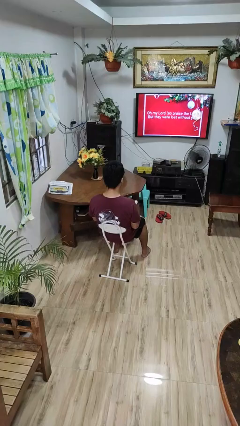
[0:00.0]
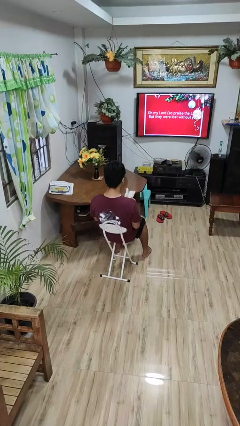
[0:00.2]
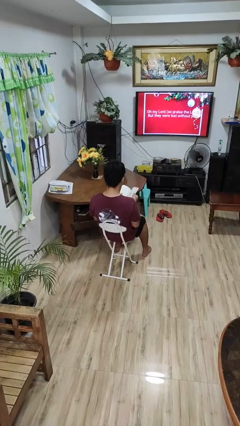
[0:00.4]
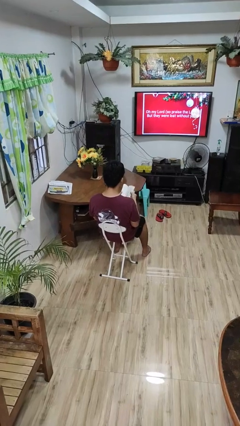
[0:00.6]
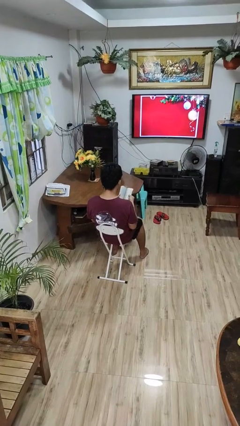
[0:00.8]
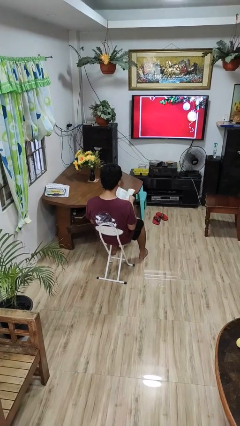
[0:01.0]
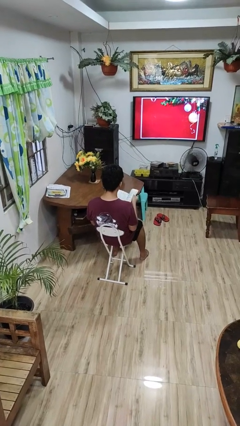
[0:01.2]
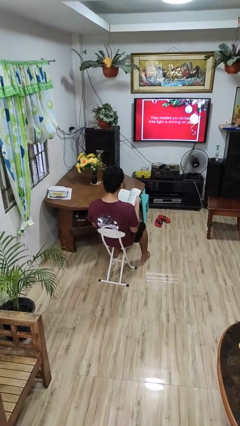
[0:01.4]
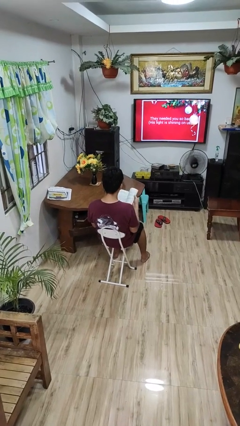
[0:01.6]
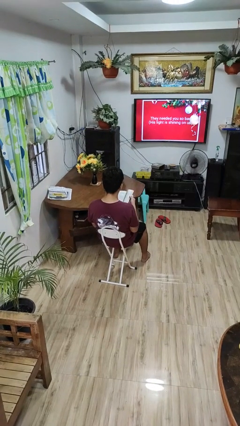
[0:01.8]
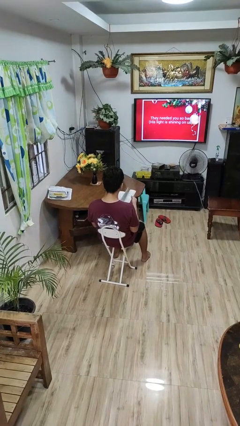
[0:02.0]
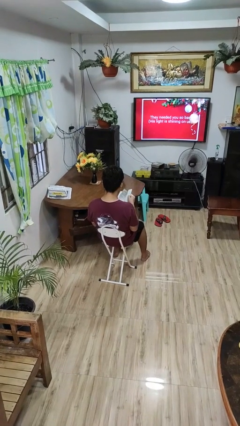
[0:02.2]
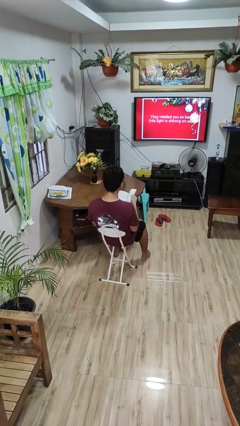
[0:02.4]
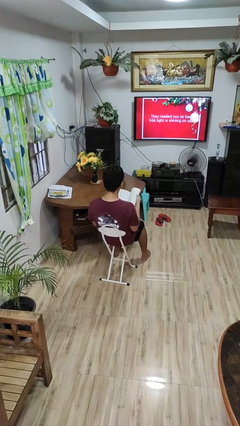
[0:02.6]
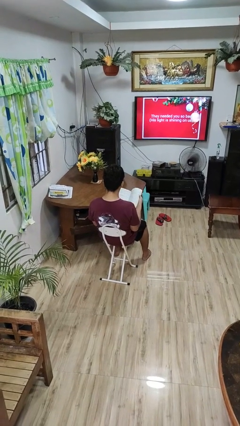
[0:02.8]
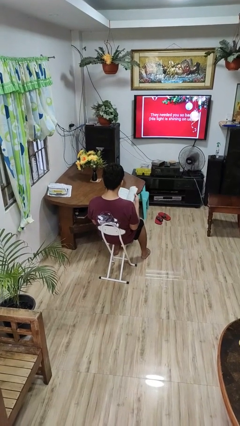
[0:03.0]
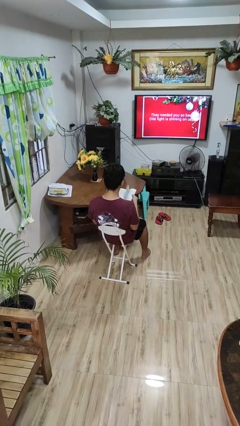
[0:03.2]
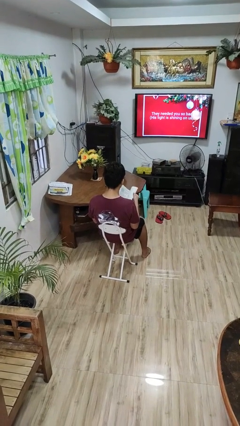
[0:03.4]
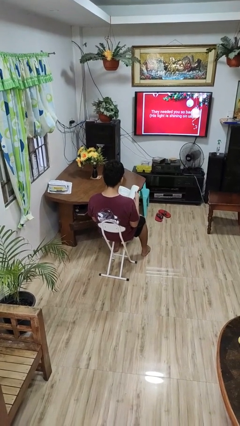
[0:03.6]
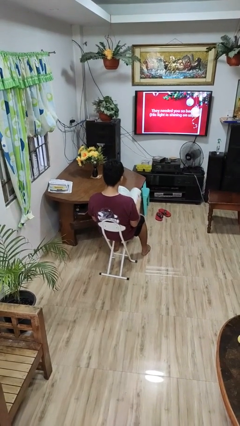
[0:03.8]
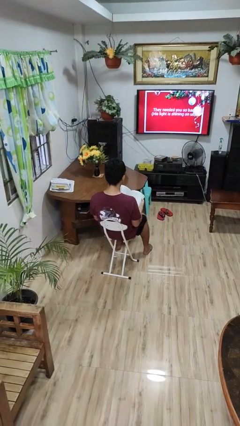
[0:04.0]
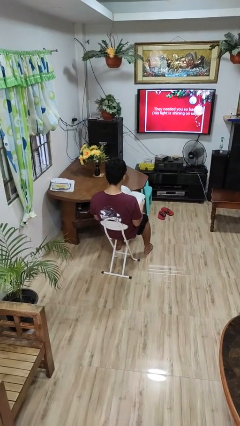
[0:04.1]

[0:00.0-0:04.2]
person reads book

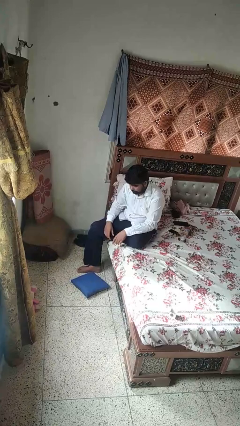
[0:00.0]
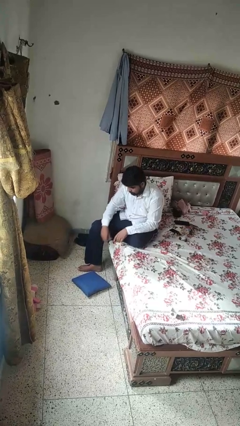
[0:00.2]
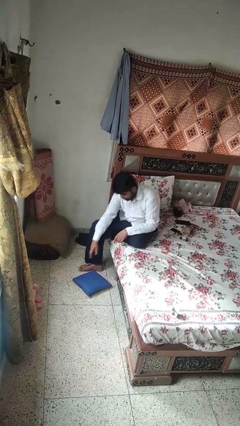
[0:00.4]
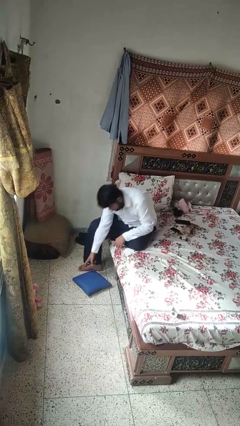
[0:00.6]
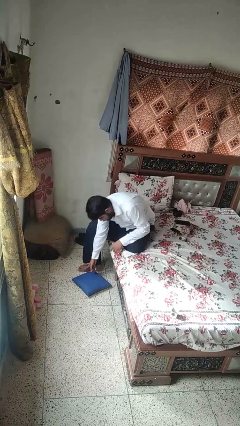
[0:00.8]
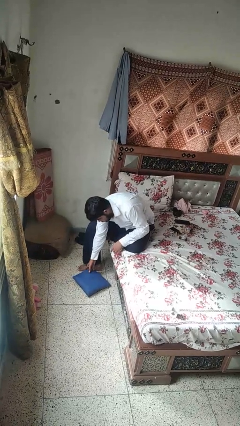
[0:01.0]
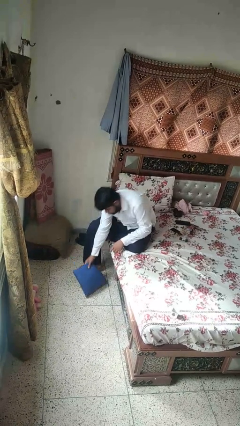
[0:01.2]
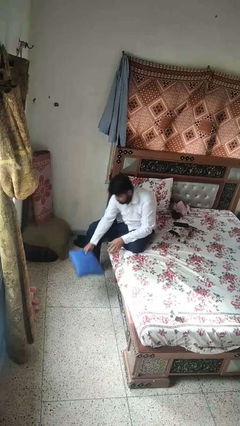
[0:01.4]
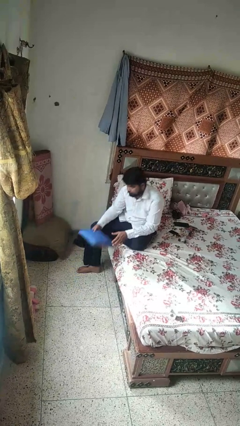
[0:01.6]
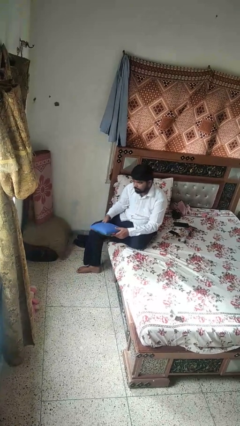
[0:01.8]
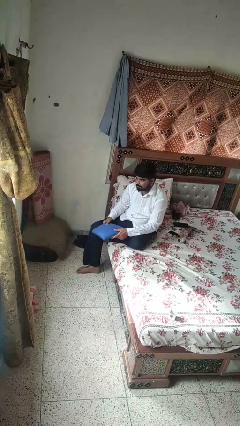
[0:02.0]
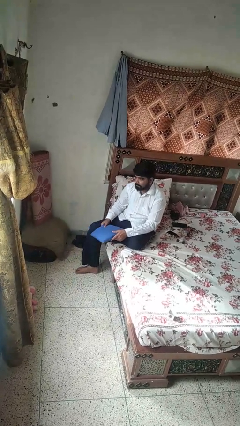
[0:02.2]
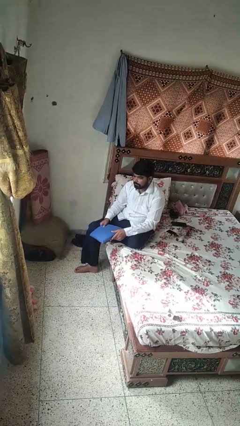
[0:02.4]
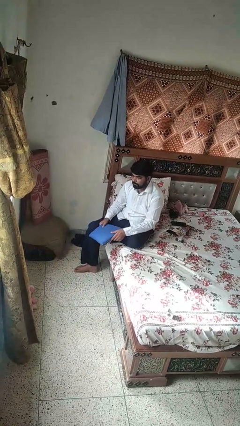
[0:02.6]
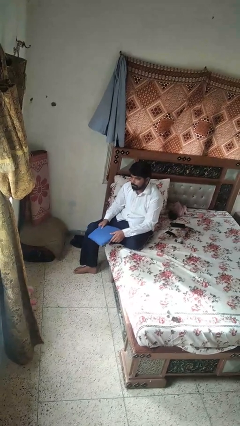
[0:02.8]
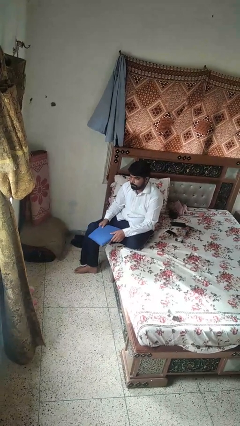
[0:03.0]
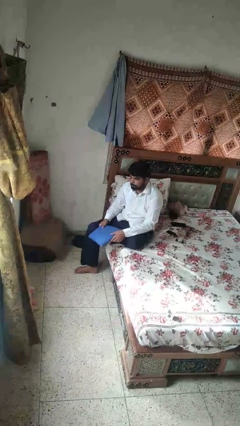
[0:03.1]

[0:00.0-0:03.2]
person picks up object from floor

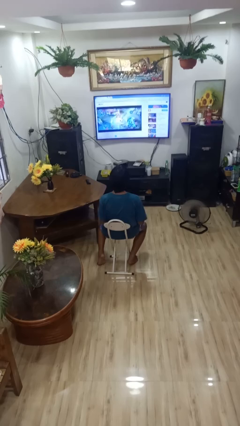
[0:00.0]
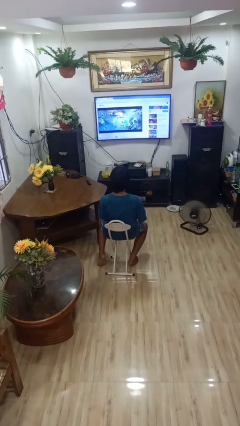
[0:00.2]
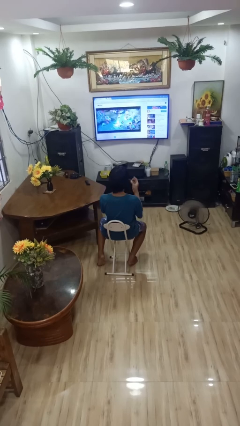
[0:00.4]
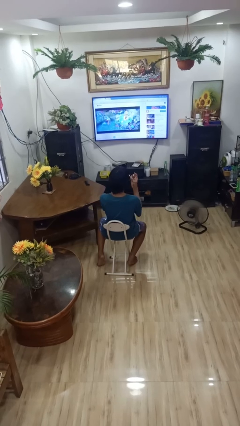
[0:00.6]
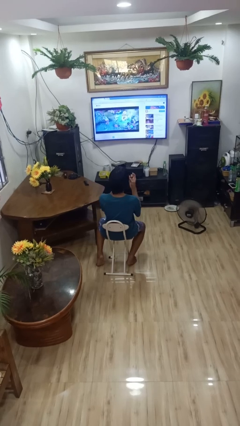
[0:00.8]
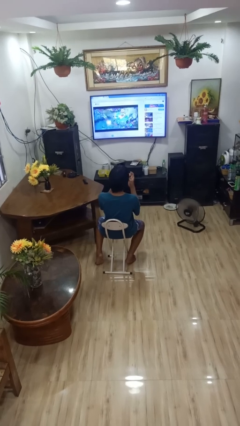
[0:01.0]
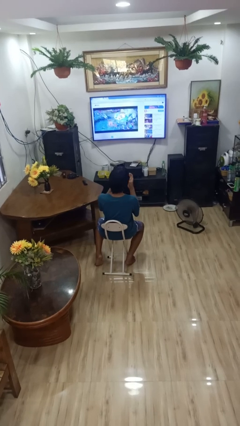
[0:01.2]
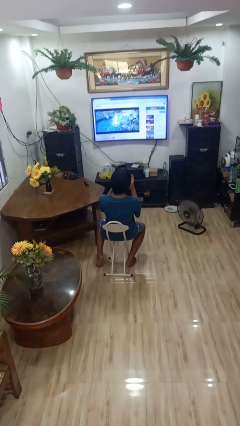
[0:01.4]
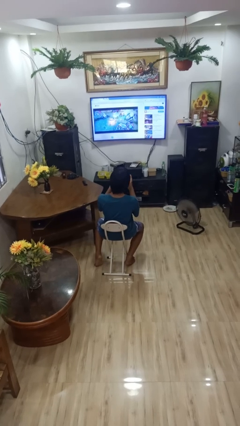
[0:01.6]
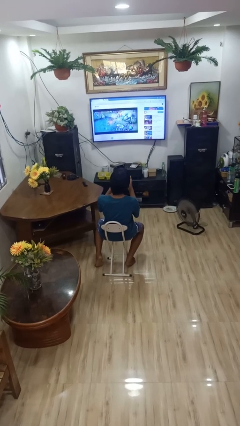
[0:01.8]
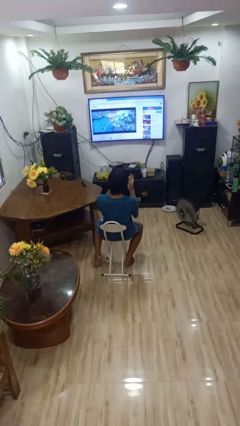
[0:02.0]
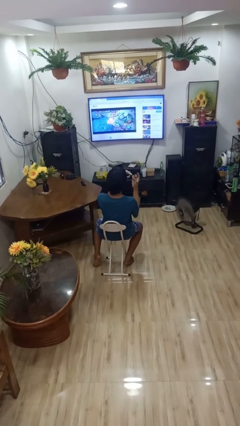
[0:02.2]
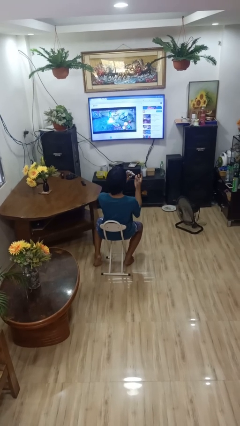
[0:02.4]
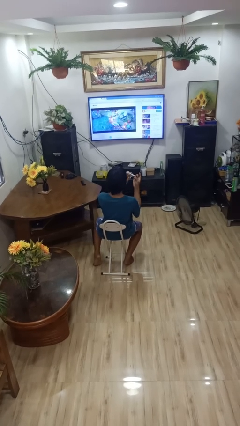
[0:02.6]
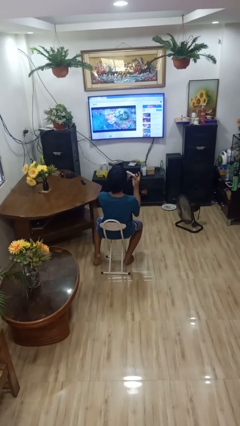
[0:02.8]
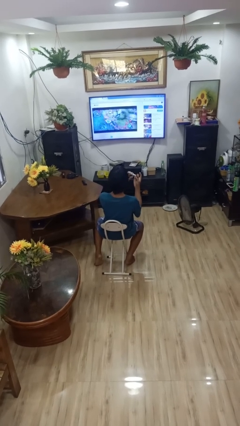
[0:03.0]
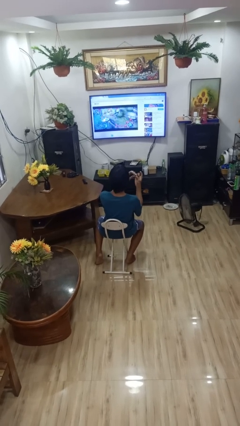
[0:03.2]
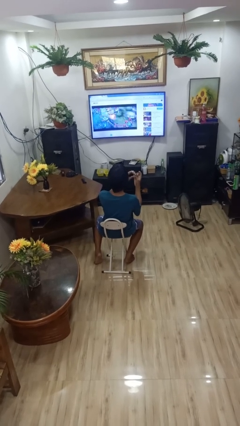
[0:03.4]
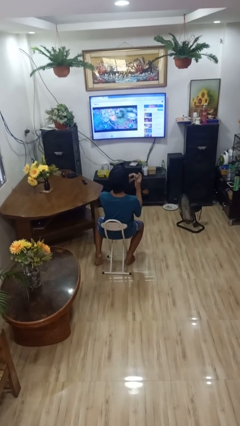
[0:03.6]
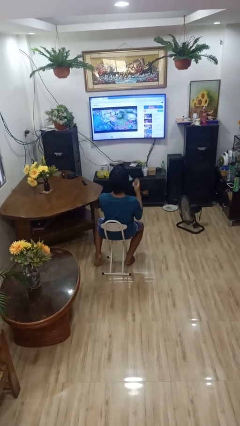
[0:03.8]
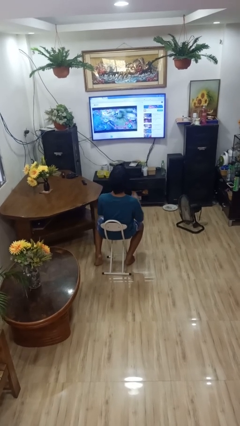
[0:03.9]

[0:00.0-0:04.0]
person clips fingernails

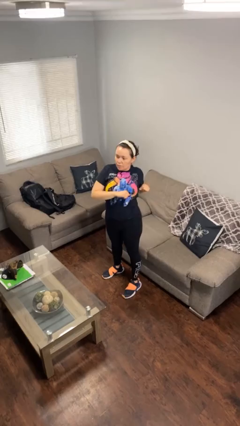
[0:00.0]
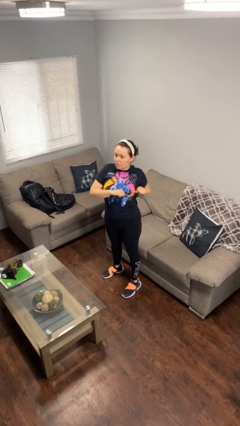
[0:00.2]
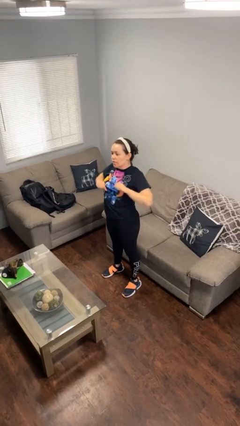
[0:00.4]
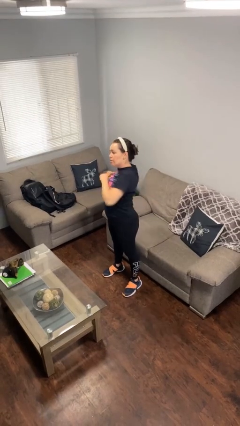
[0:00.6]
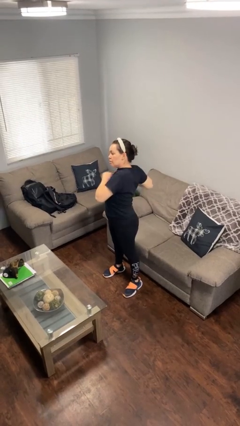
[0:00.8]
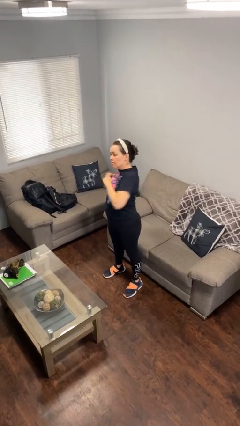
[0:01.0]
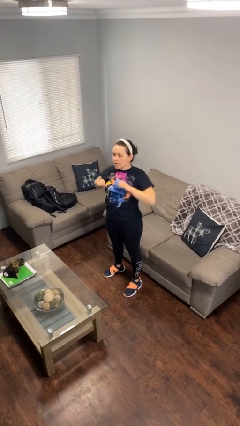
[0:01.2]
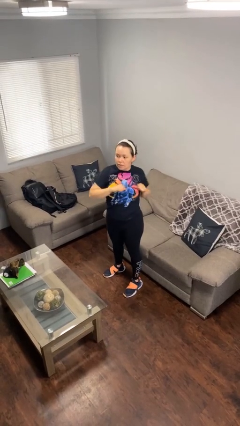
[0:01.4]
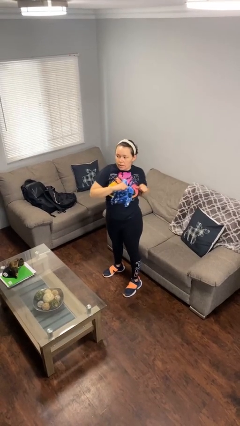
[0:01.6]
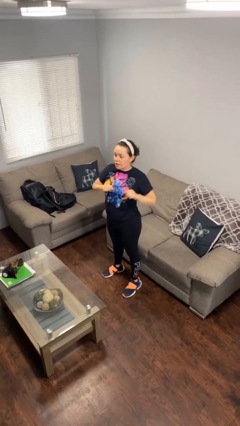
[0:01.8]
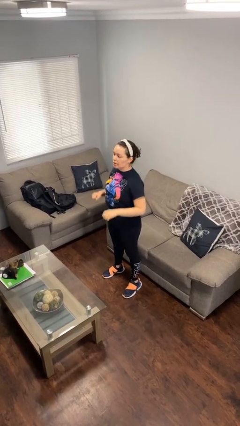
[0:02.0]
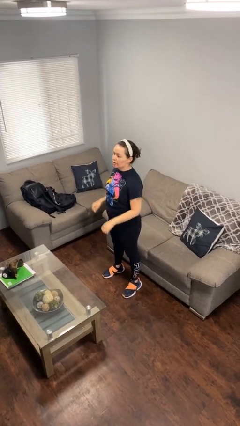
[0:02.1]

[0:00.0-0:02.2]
person stretches arms to side

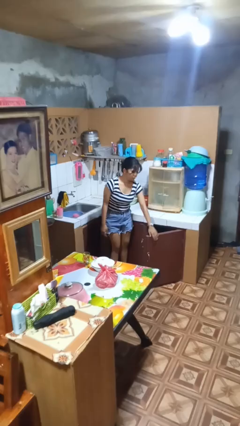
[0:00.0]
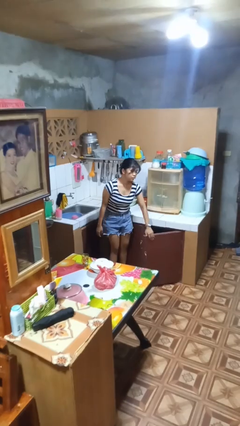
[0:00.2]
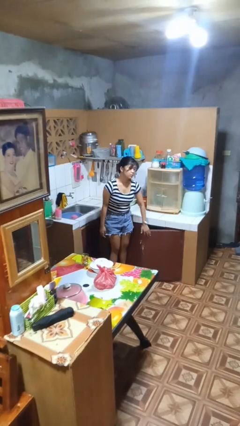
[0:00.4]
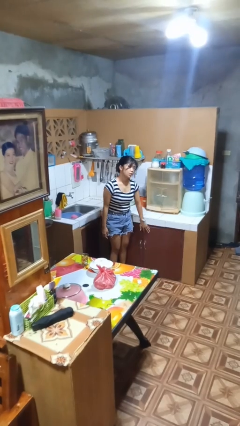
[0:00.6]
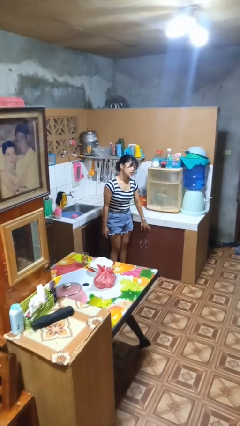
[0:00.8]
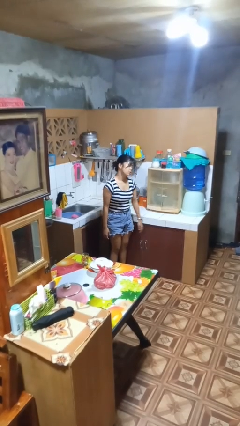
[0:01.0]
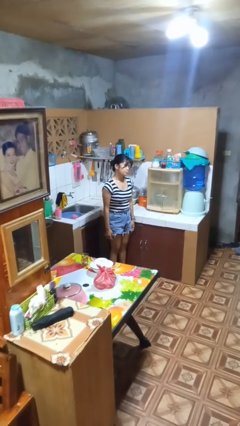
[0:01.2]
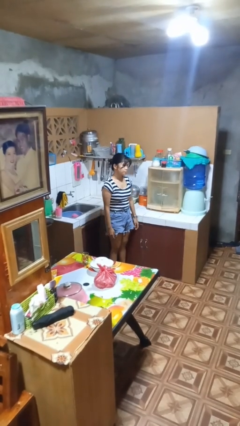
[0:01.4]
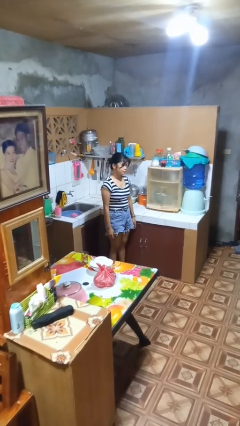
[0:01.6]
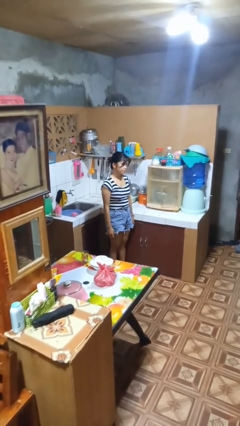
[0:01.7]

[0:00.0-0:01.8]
person closes cabinet

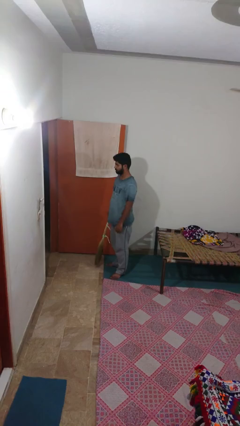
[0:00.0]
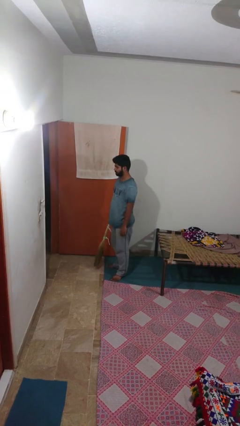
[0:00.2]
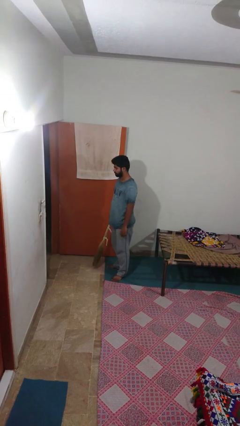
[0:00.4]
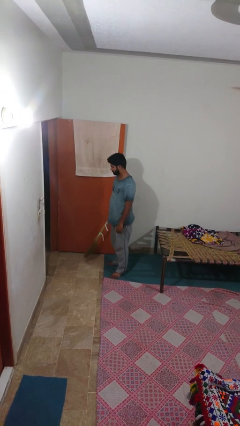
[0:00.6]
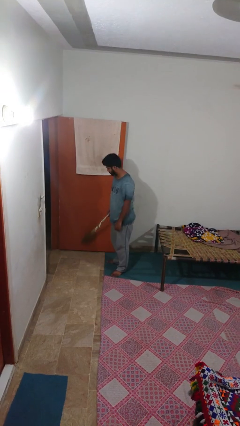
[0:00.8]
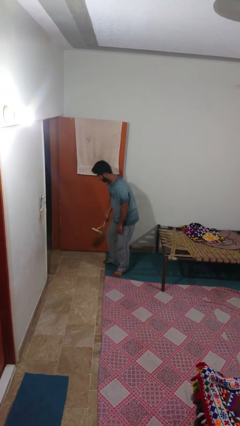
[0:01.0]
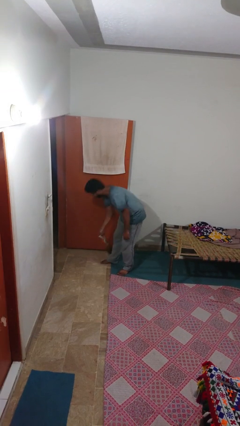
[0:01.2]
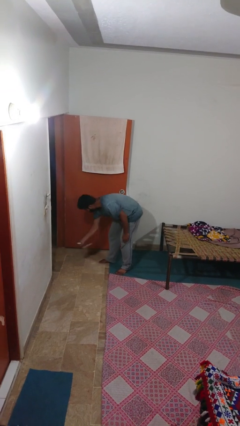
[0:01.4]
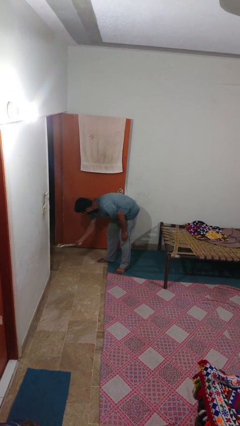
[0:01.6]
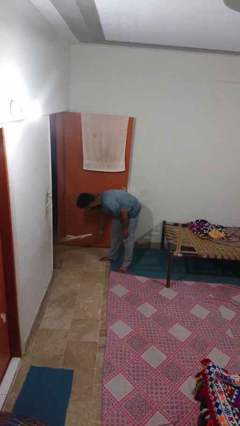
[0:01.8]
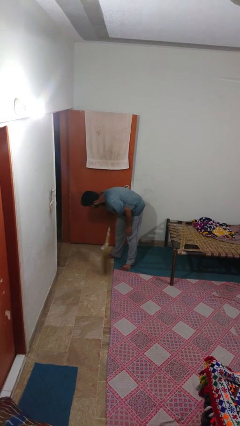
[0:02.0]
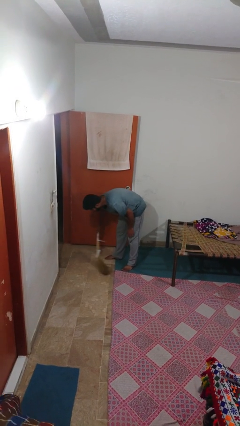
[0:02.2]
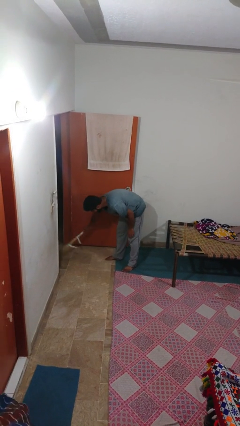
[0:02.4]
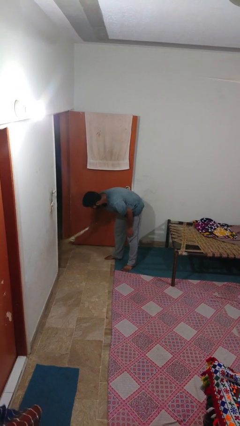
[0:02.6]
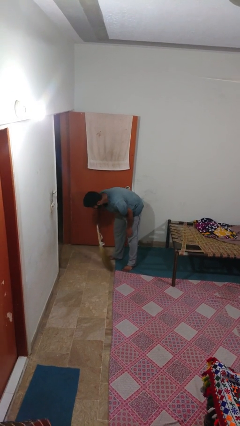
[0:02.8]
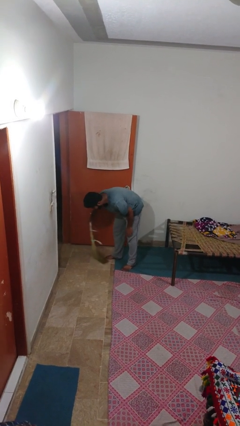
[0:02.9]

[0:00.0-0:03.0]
person sweeps floor
